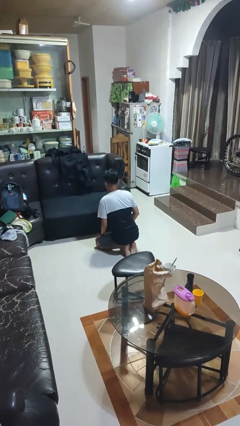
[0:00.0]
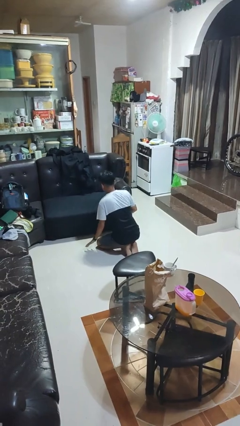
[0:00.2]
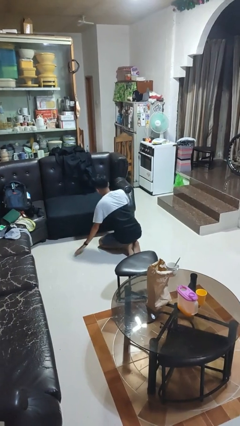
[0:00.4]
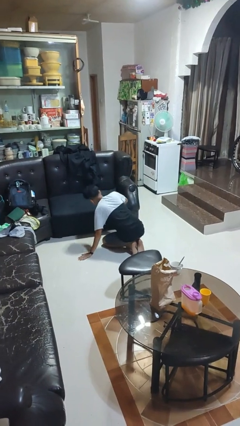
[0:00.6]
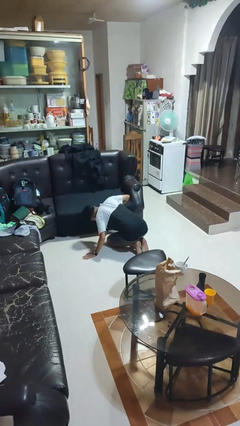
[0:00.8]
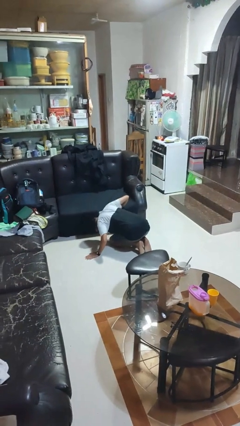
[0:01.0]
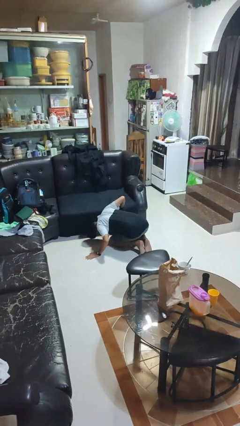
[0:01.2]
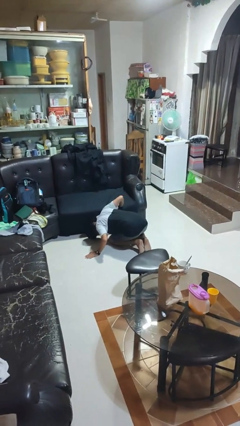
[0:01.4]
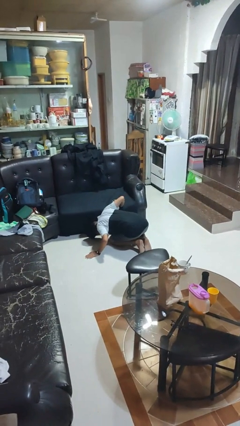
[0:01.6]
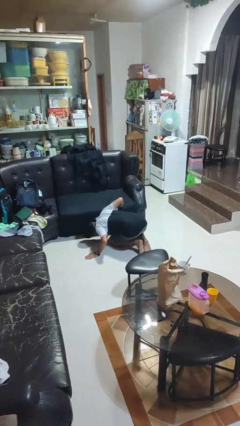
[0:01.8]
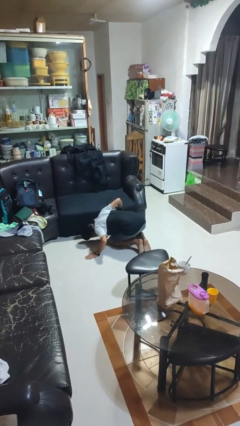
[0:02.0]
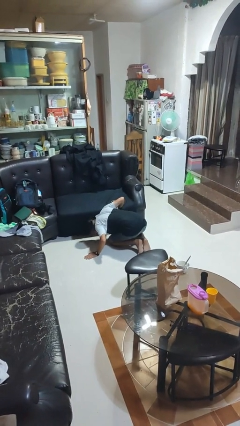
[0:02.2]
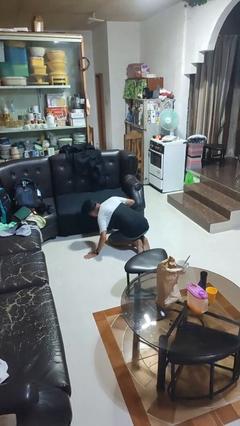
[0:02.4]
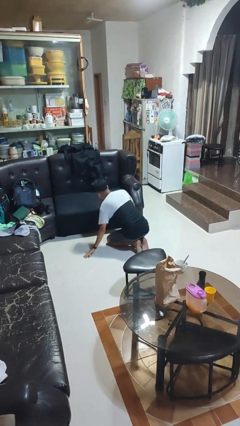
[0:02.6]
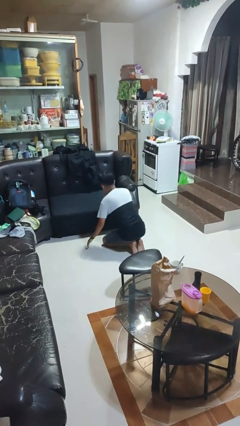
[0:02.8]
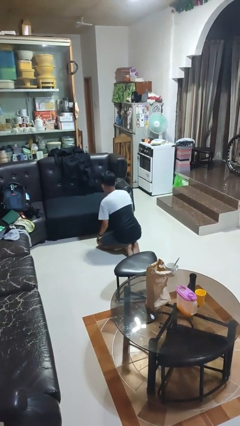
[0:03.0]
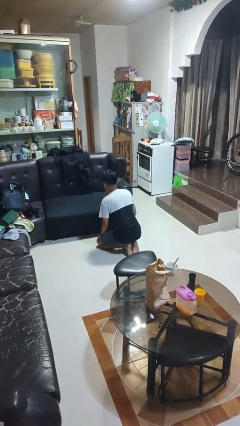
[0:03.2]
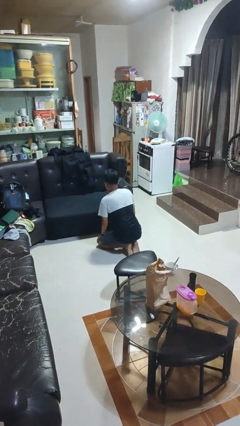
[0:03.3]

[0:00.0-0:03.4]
person searches under couch

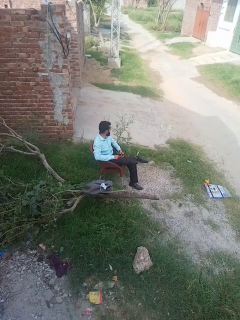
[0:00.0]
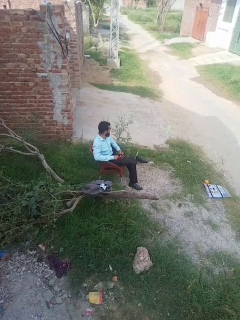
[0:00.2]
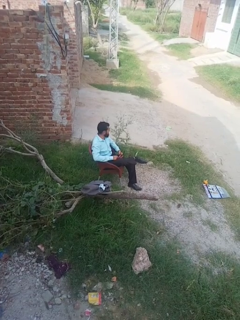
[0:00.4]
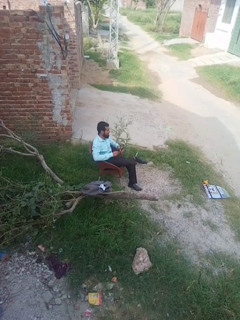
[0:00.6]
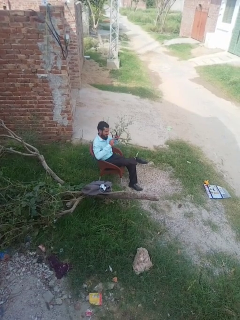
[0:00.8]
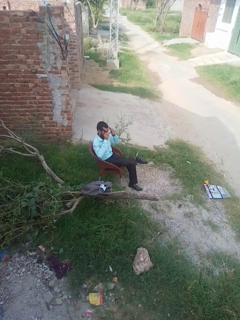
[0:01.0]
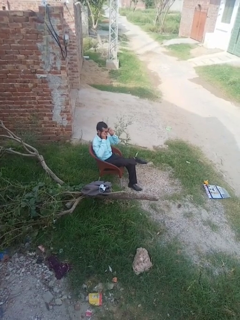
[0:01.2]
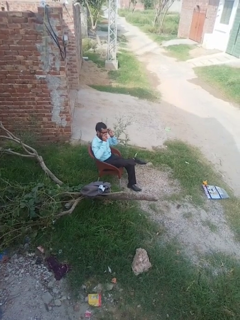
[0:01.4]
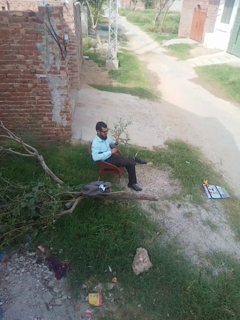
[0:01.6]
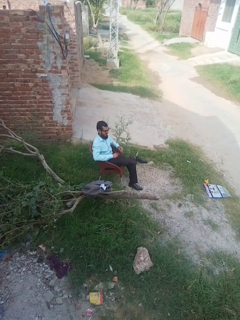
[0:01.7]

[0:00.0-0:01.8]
person puts on glasses

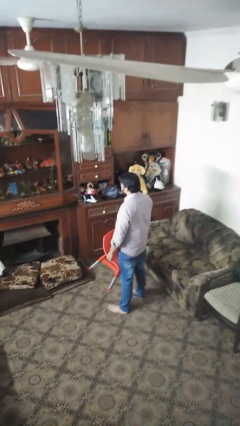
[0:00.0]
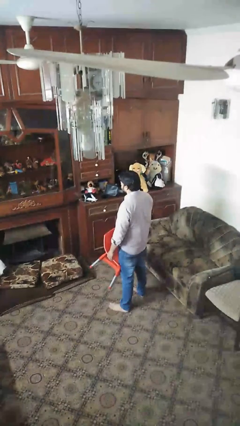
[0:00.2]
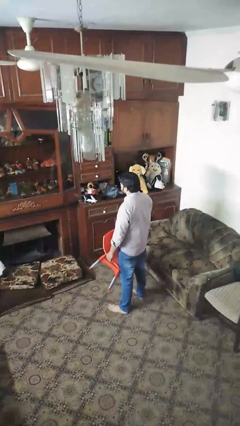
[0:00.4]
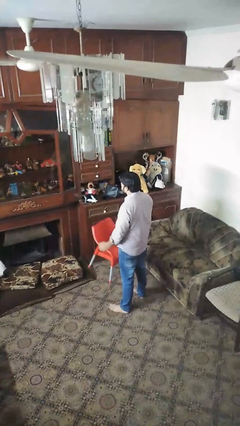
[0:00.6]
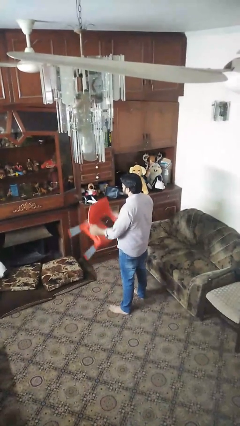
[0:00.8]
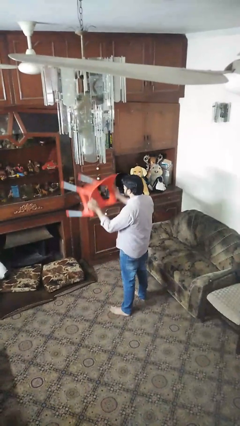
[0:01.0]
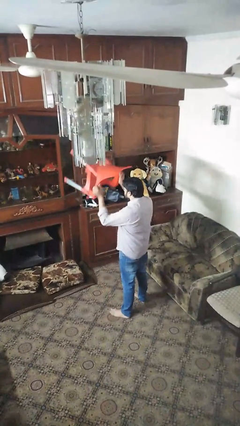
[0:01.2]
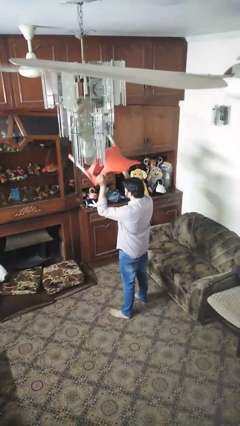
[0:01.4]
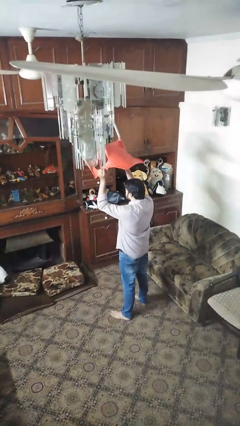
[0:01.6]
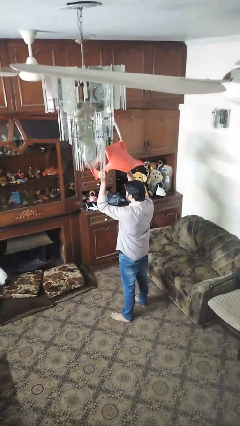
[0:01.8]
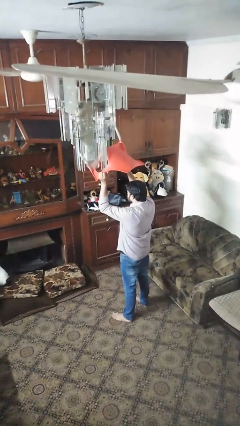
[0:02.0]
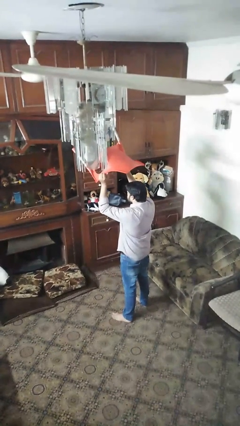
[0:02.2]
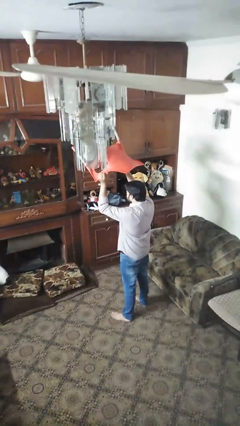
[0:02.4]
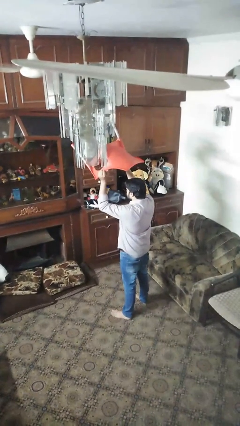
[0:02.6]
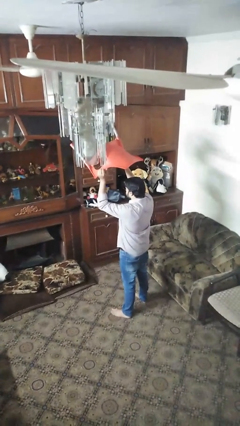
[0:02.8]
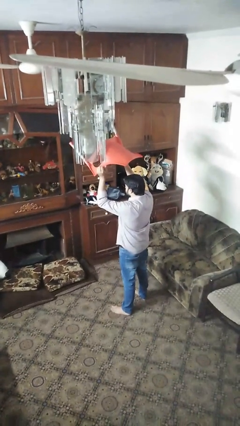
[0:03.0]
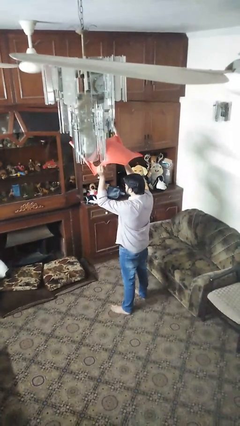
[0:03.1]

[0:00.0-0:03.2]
person holds object above head

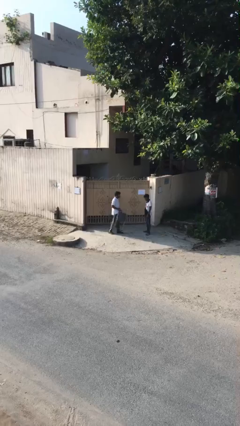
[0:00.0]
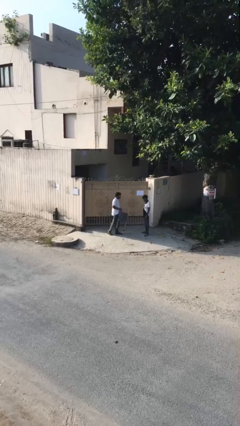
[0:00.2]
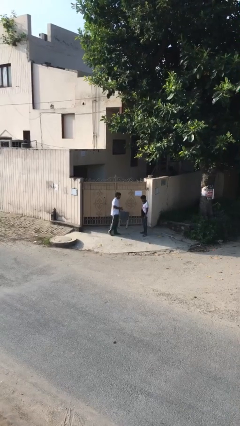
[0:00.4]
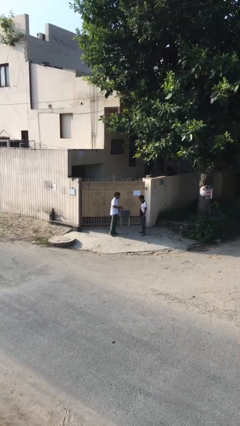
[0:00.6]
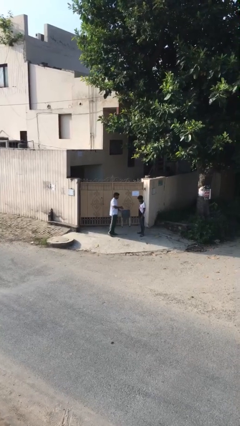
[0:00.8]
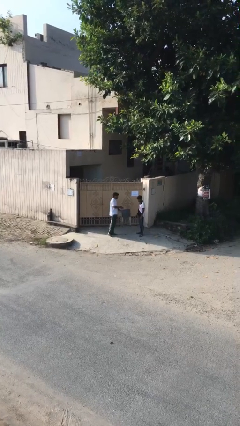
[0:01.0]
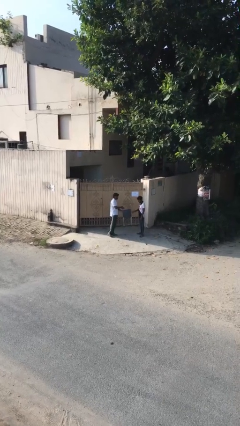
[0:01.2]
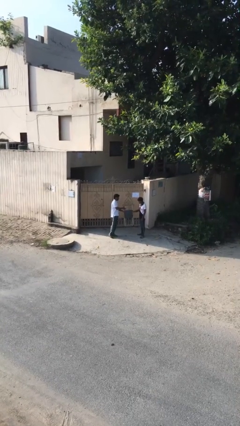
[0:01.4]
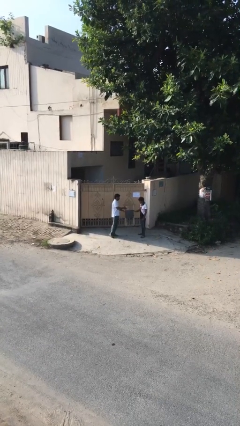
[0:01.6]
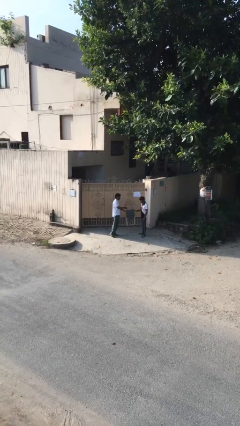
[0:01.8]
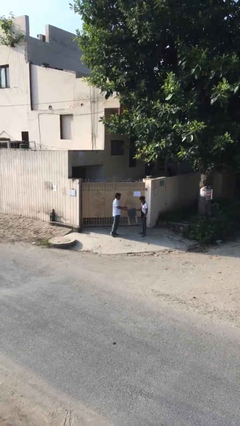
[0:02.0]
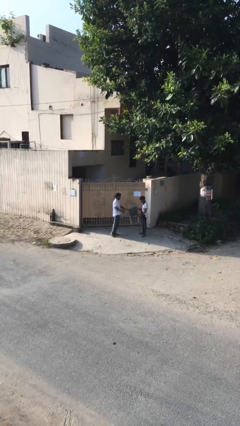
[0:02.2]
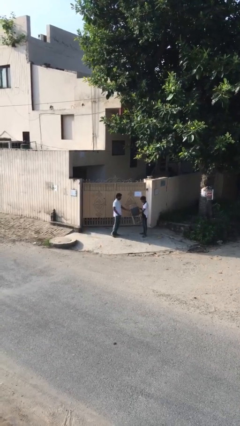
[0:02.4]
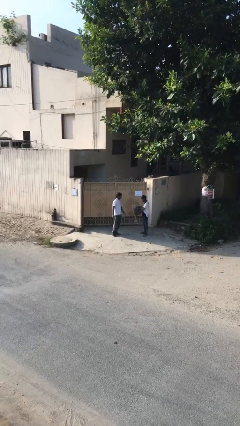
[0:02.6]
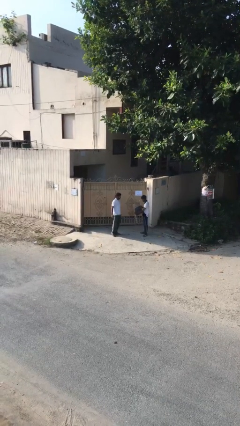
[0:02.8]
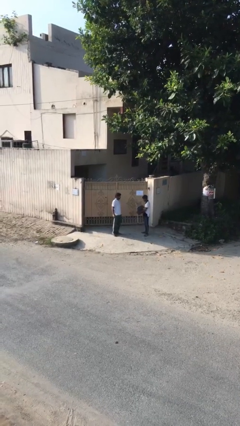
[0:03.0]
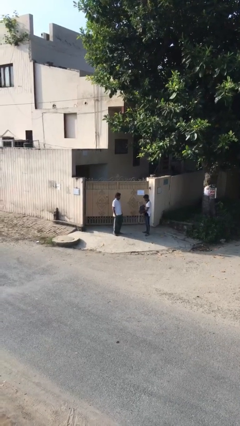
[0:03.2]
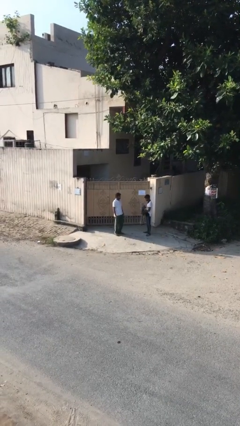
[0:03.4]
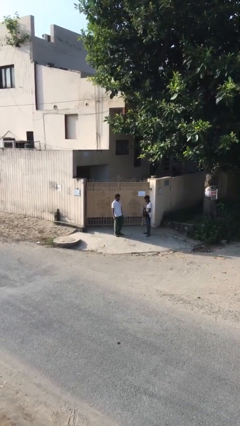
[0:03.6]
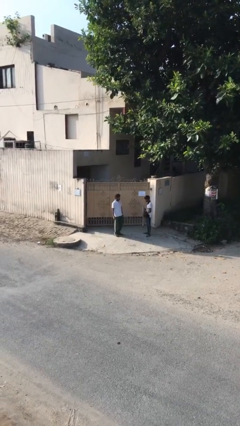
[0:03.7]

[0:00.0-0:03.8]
person transfers object to person

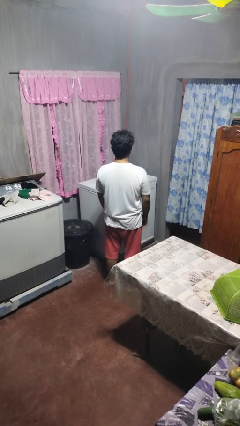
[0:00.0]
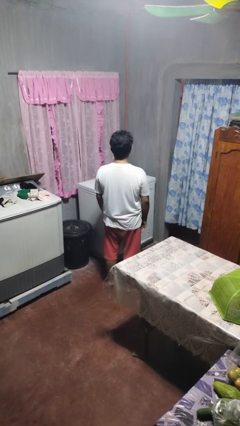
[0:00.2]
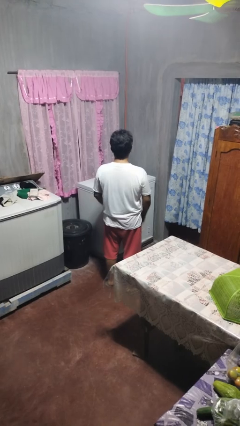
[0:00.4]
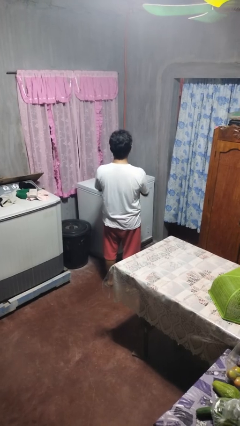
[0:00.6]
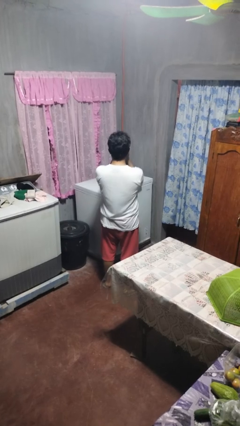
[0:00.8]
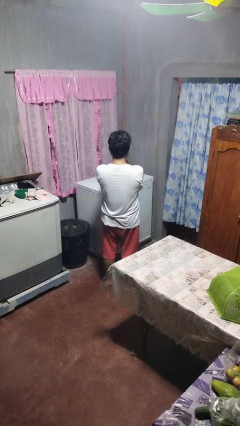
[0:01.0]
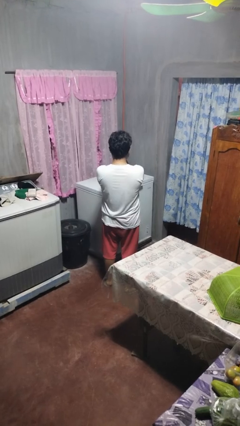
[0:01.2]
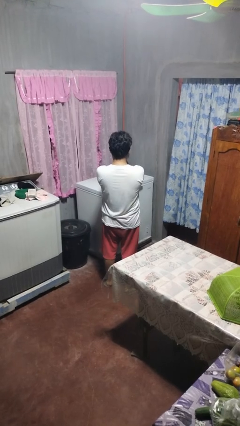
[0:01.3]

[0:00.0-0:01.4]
person covers face with hands

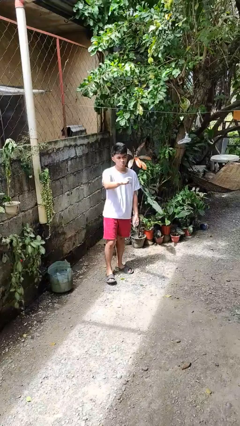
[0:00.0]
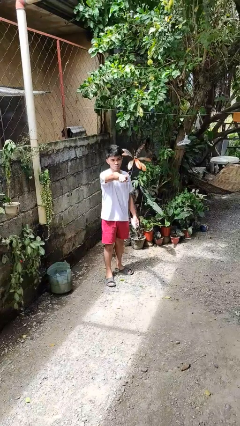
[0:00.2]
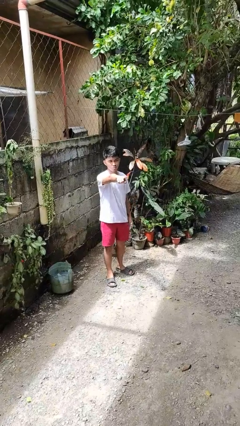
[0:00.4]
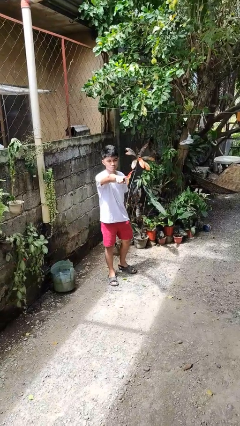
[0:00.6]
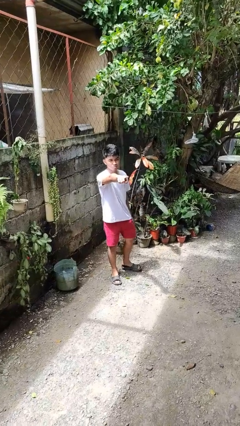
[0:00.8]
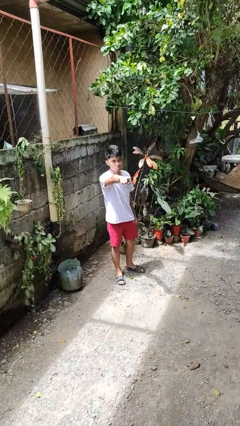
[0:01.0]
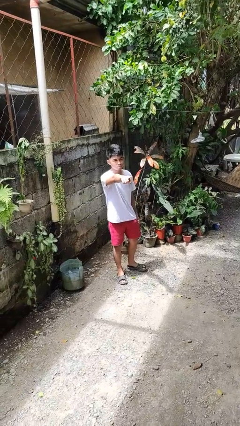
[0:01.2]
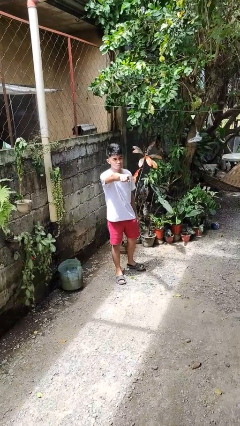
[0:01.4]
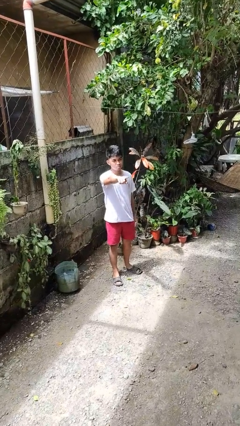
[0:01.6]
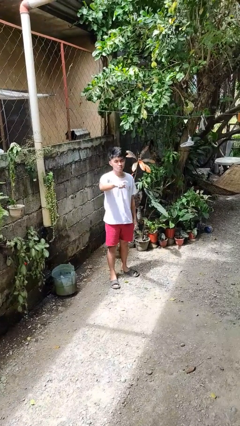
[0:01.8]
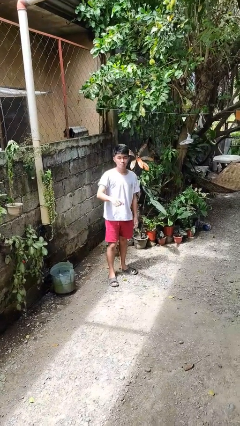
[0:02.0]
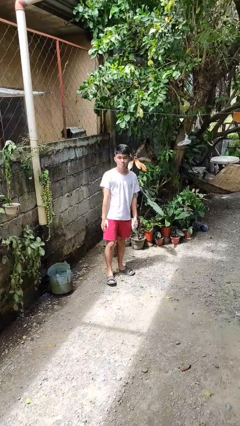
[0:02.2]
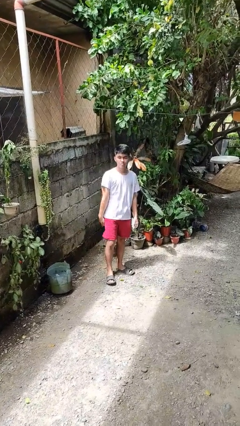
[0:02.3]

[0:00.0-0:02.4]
person points at person

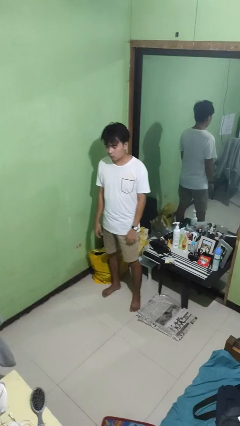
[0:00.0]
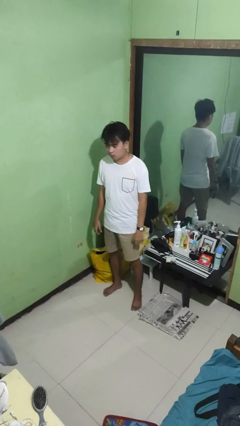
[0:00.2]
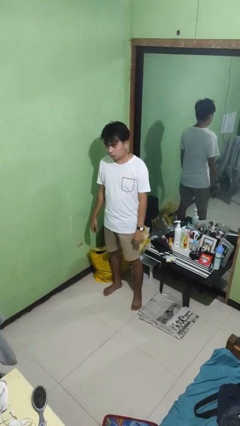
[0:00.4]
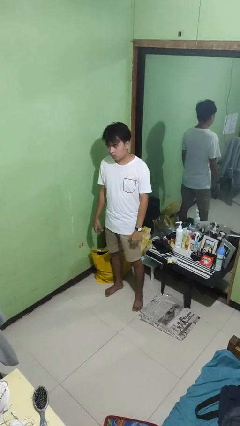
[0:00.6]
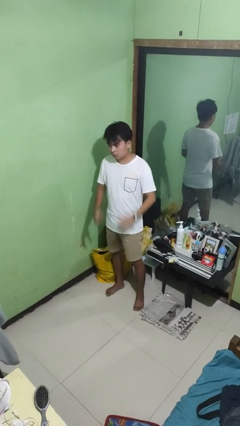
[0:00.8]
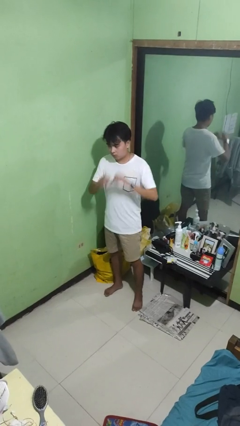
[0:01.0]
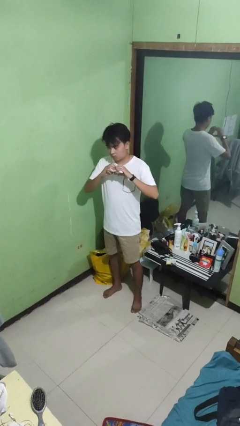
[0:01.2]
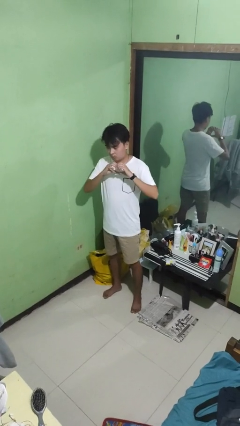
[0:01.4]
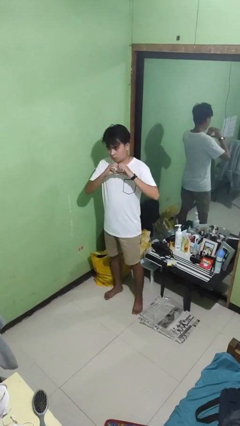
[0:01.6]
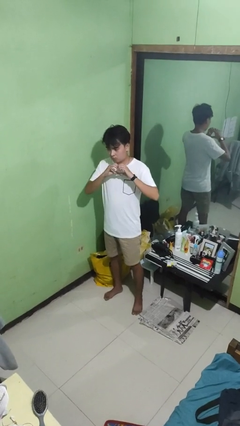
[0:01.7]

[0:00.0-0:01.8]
person gestures heart
